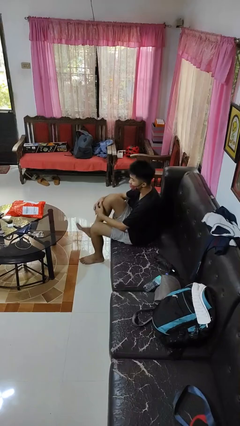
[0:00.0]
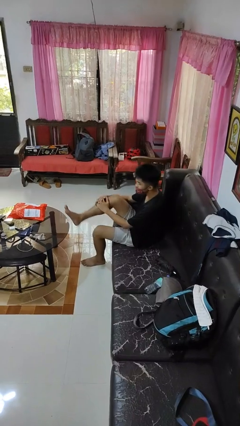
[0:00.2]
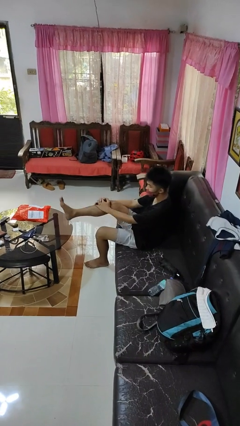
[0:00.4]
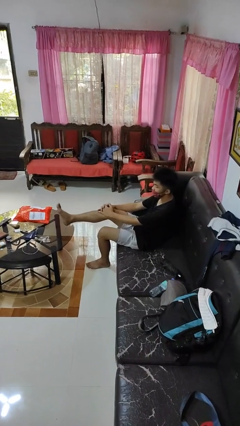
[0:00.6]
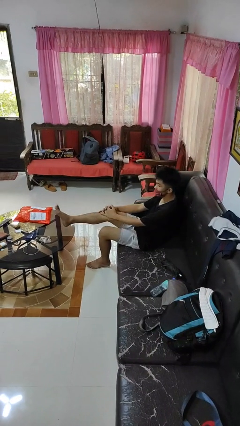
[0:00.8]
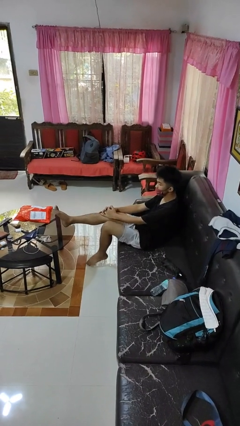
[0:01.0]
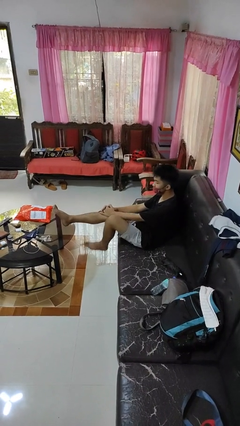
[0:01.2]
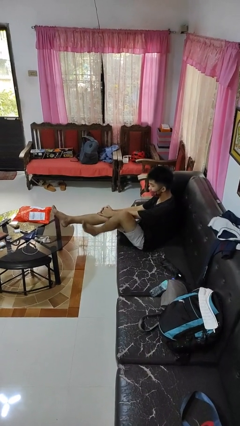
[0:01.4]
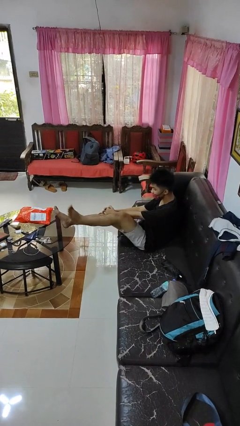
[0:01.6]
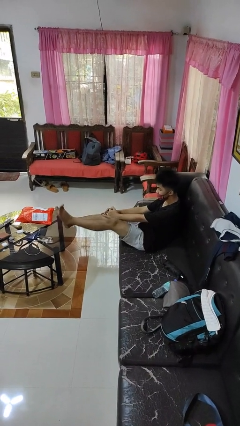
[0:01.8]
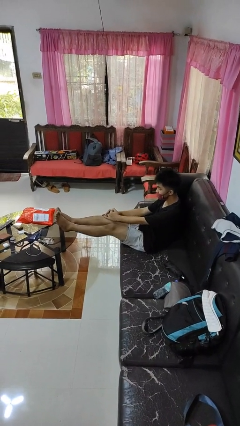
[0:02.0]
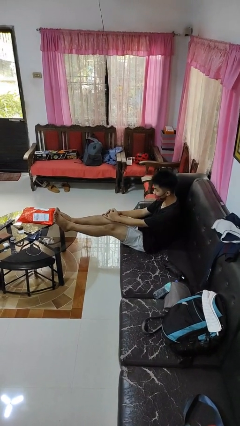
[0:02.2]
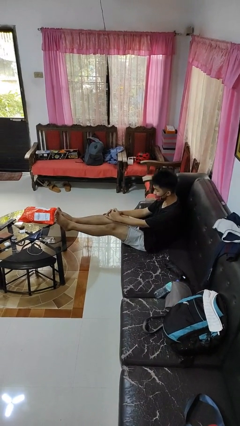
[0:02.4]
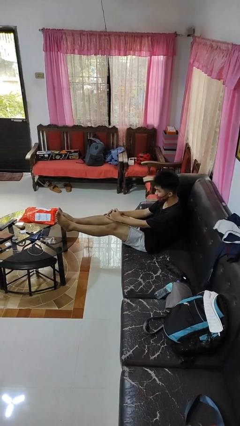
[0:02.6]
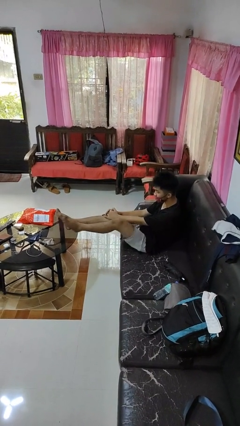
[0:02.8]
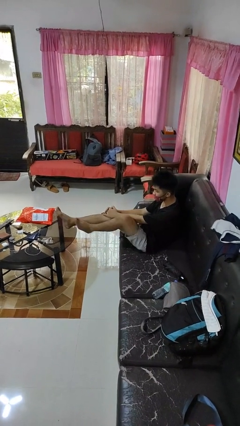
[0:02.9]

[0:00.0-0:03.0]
person puts feet up

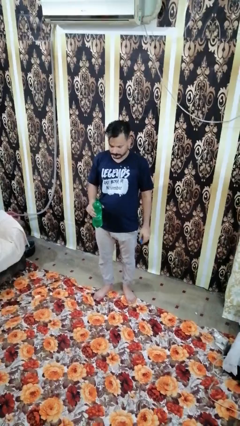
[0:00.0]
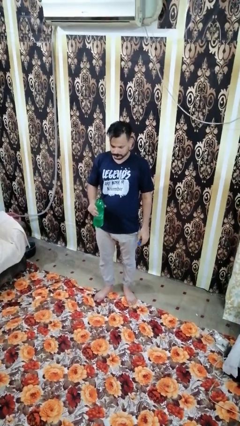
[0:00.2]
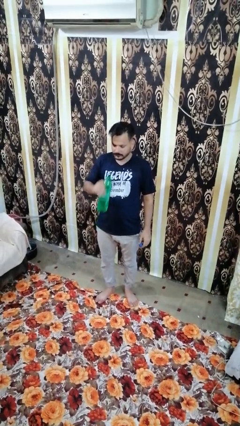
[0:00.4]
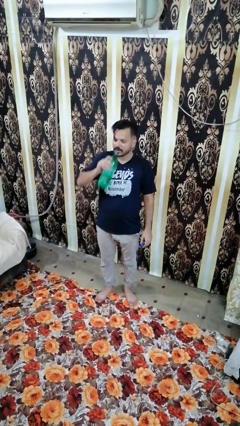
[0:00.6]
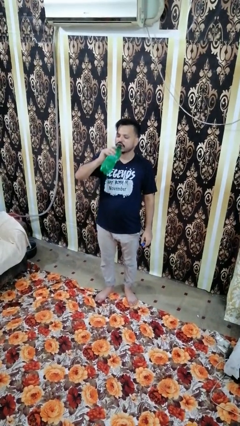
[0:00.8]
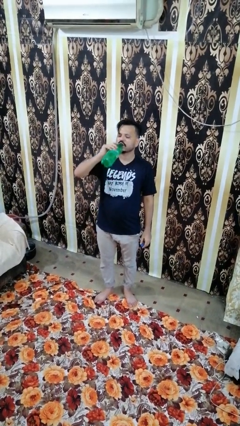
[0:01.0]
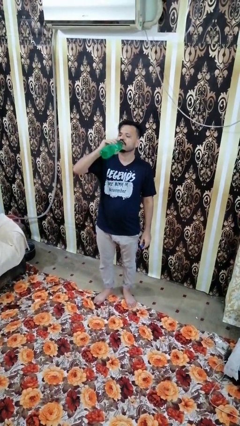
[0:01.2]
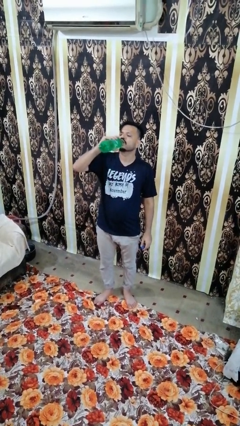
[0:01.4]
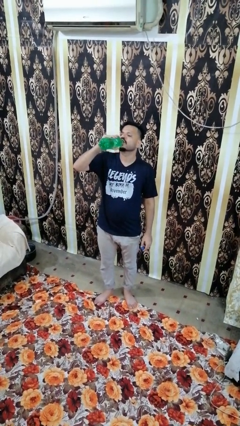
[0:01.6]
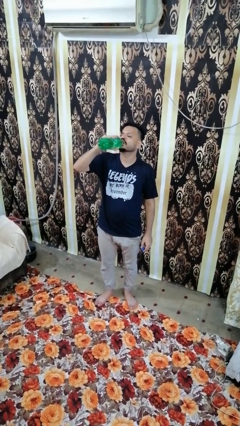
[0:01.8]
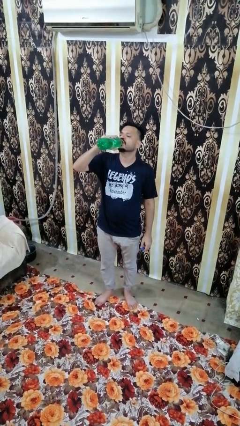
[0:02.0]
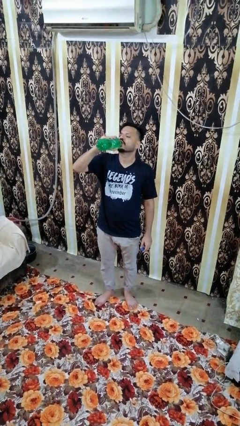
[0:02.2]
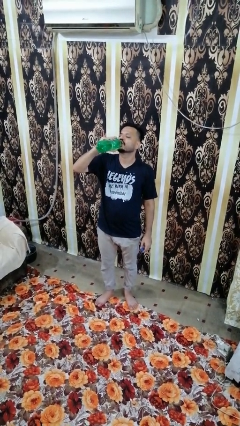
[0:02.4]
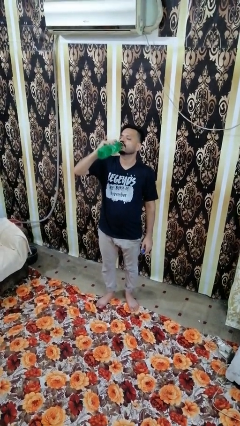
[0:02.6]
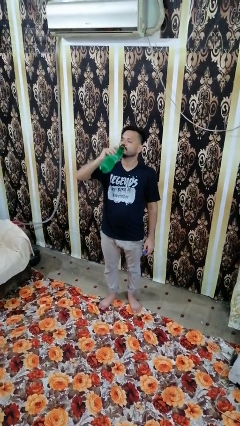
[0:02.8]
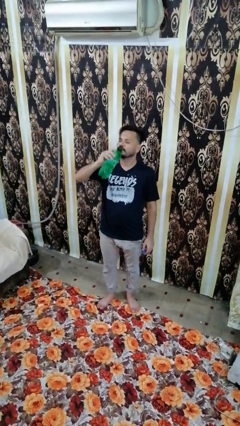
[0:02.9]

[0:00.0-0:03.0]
person drinks from beverage can

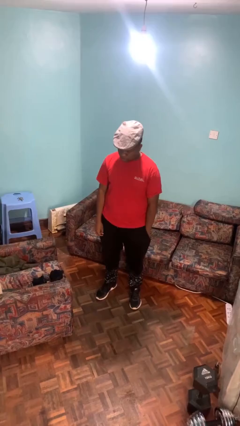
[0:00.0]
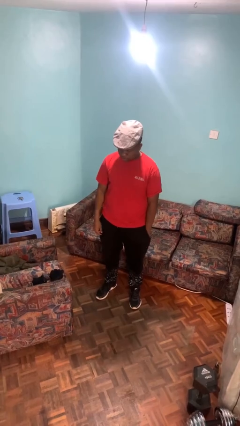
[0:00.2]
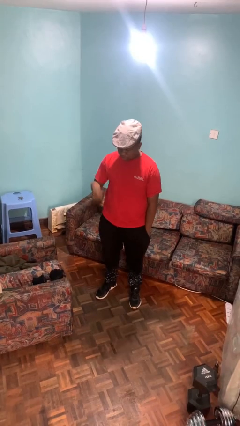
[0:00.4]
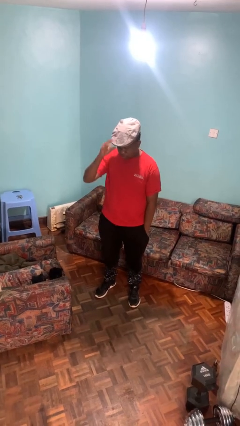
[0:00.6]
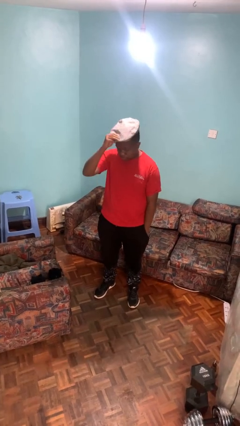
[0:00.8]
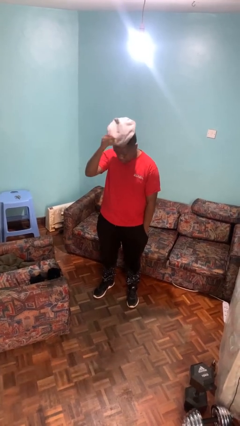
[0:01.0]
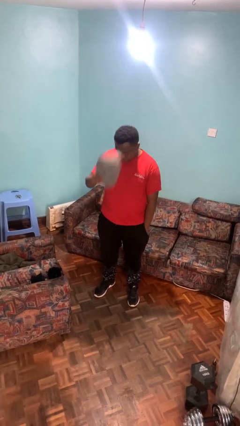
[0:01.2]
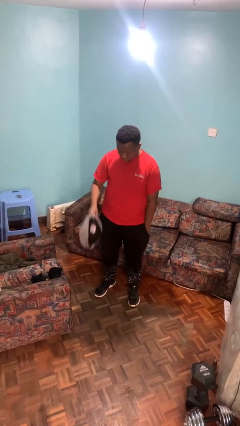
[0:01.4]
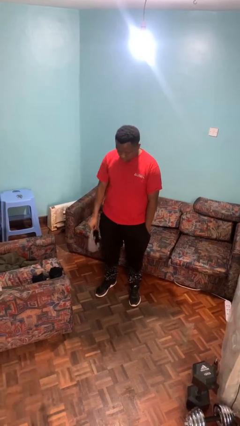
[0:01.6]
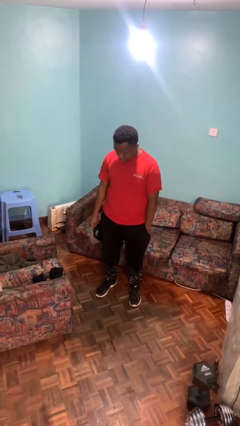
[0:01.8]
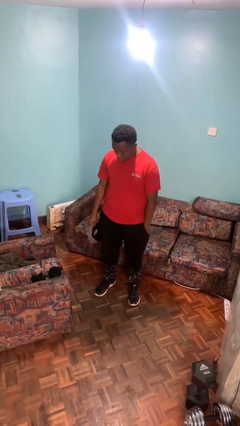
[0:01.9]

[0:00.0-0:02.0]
person takes off hat

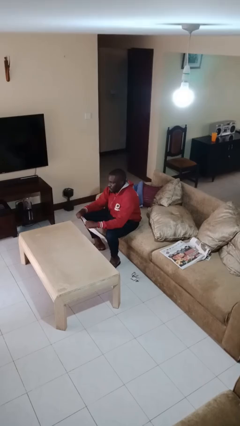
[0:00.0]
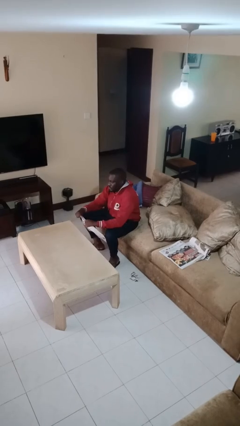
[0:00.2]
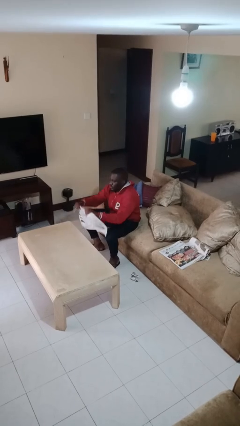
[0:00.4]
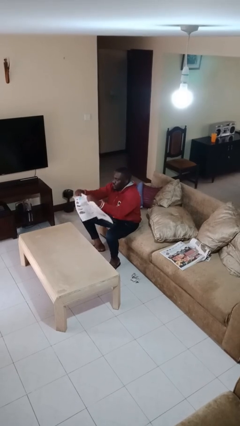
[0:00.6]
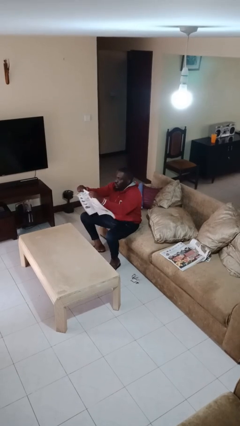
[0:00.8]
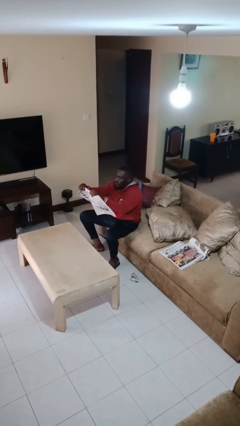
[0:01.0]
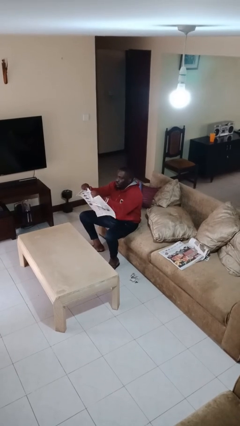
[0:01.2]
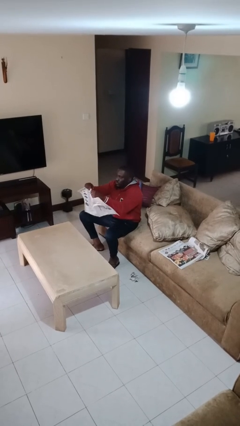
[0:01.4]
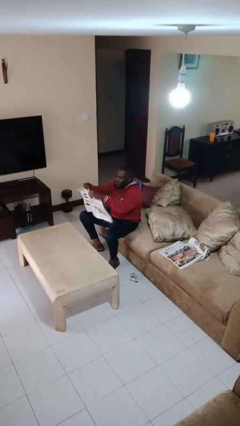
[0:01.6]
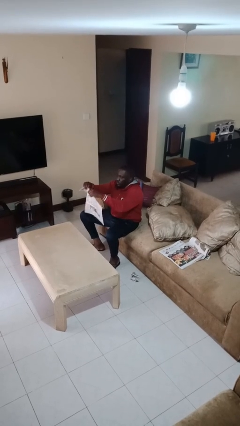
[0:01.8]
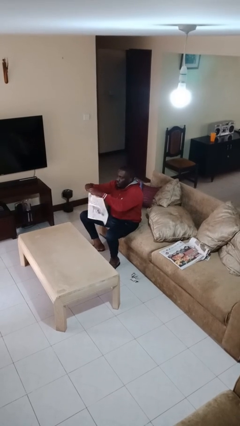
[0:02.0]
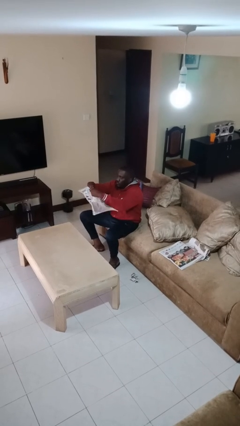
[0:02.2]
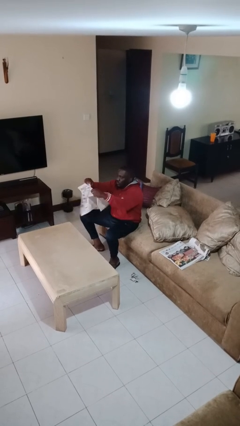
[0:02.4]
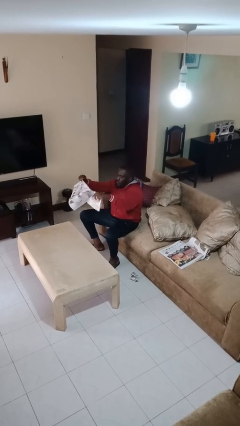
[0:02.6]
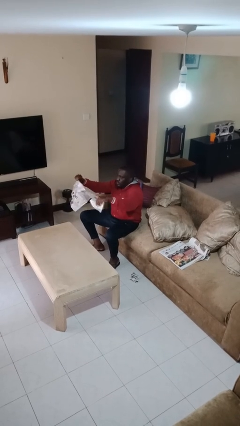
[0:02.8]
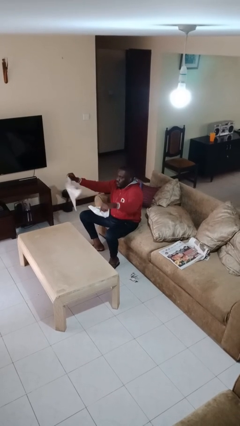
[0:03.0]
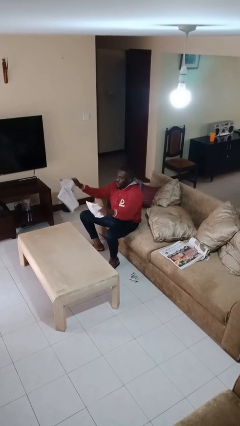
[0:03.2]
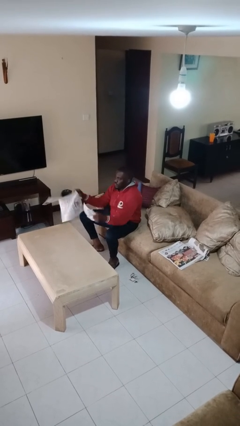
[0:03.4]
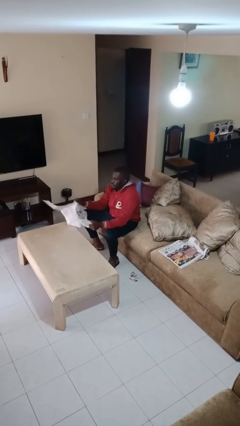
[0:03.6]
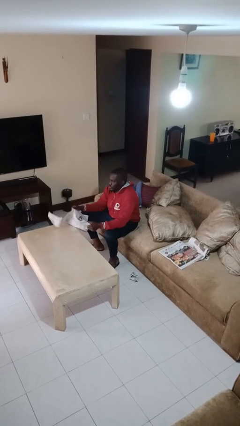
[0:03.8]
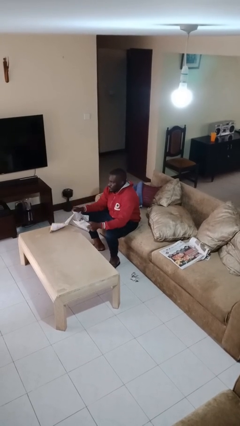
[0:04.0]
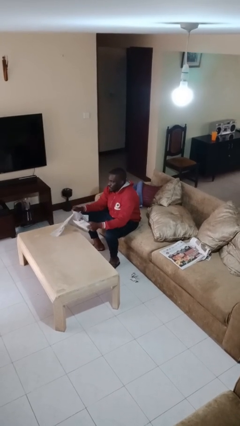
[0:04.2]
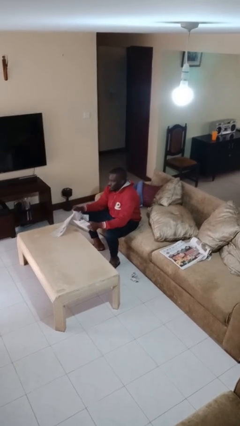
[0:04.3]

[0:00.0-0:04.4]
person tears paper

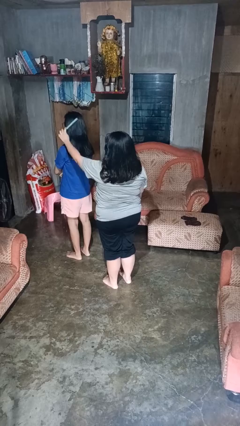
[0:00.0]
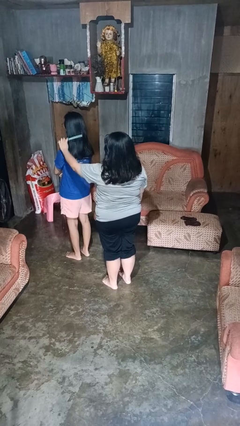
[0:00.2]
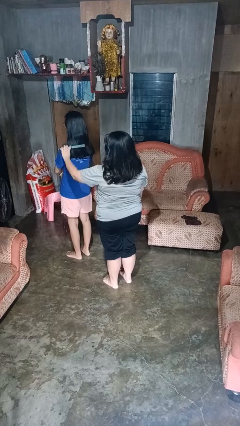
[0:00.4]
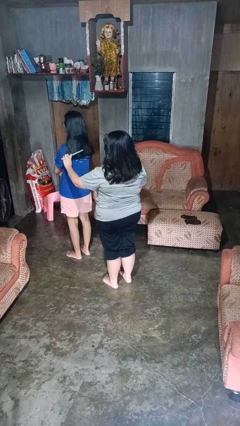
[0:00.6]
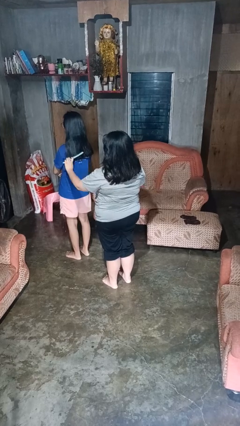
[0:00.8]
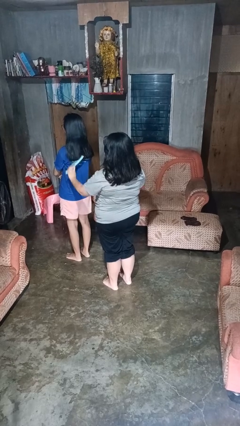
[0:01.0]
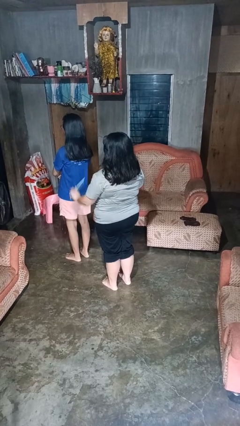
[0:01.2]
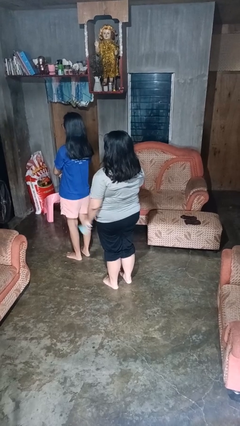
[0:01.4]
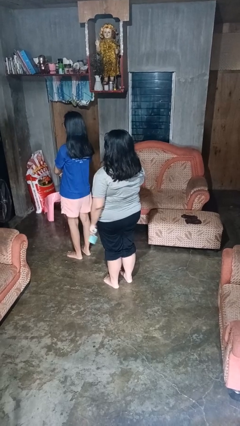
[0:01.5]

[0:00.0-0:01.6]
person brushes hair of person

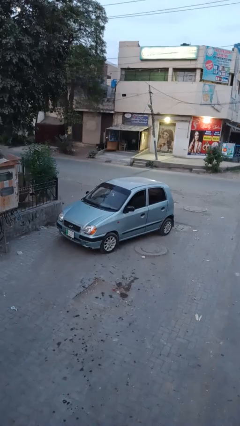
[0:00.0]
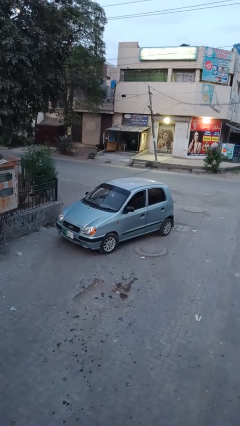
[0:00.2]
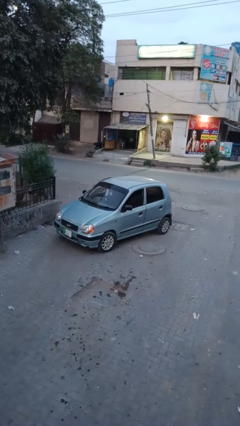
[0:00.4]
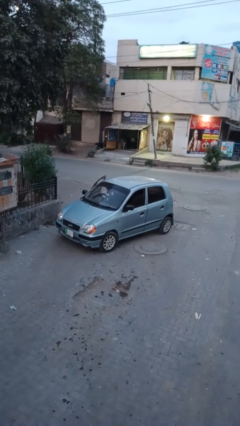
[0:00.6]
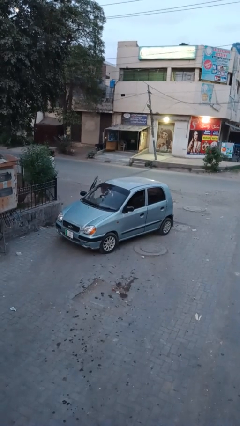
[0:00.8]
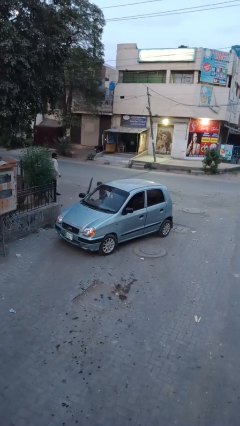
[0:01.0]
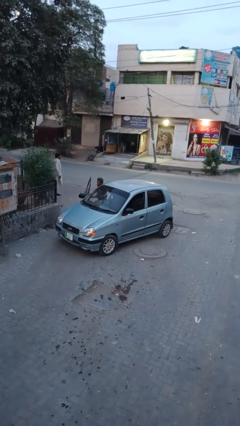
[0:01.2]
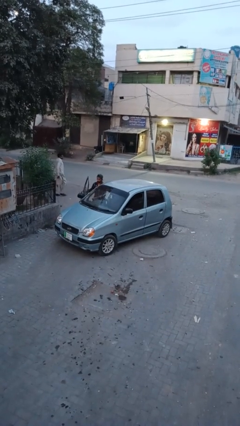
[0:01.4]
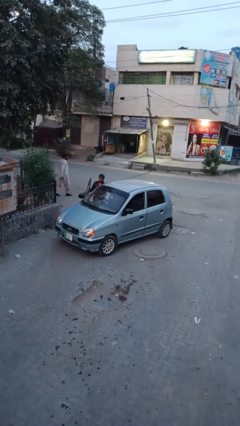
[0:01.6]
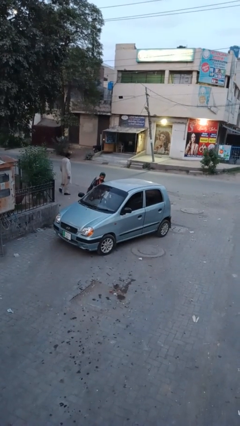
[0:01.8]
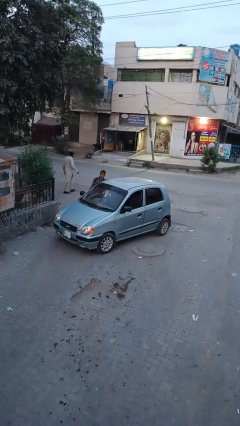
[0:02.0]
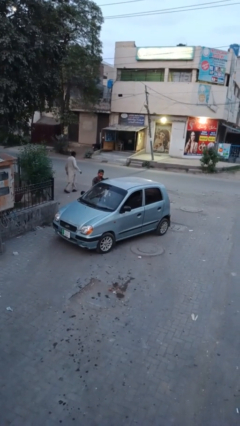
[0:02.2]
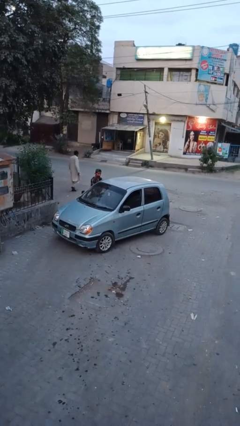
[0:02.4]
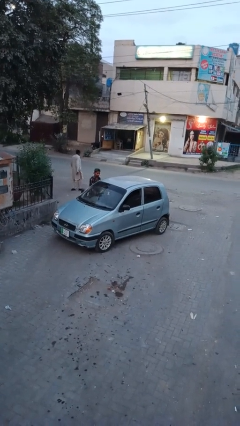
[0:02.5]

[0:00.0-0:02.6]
car drops off person

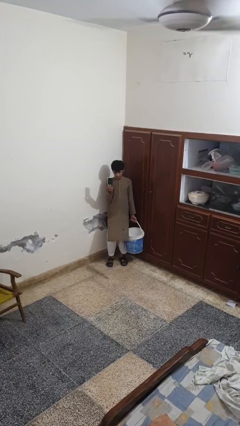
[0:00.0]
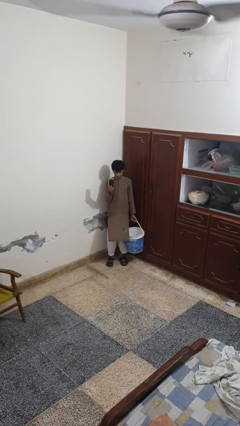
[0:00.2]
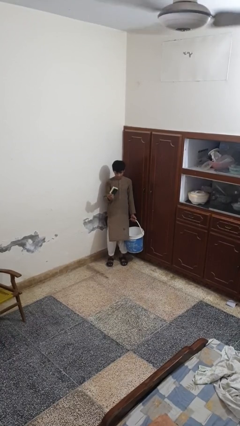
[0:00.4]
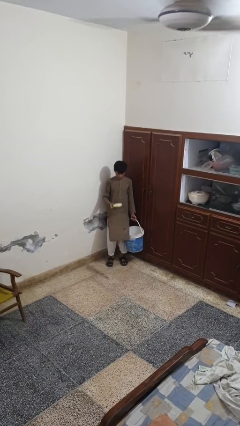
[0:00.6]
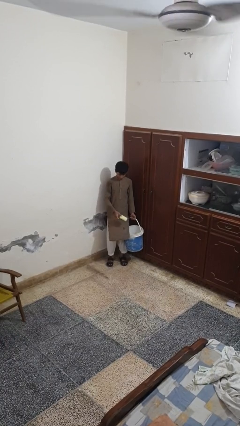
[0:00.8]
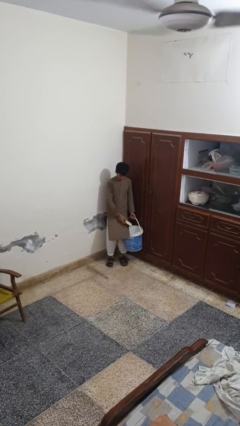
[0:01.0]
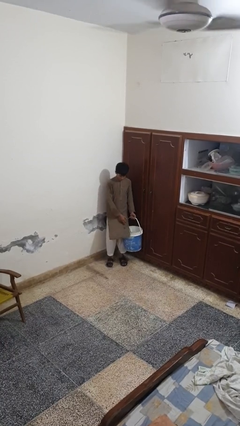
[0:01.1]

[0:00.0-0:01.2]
person puts object into basket
